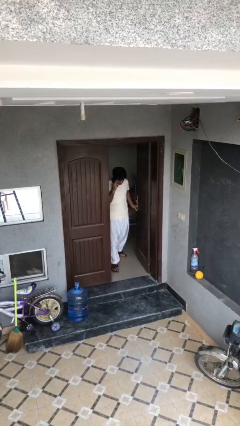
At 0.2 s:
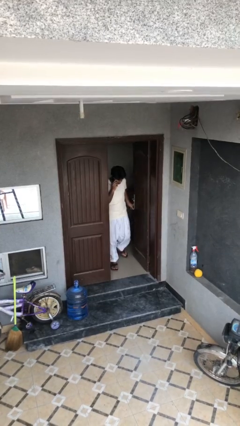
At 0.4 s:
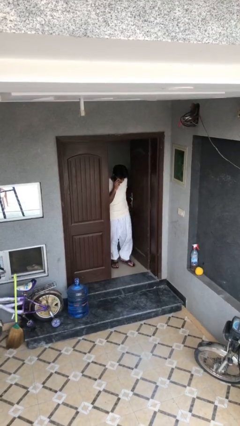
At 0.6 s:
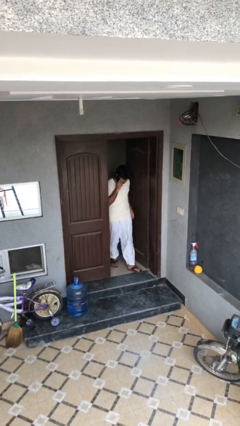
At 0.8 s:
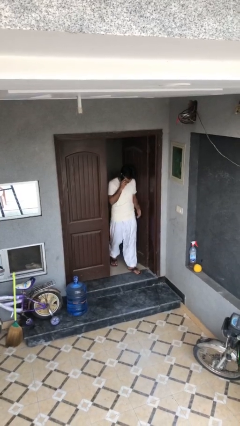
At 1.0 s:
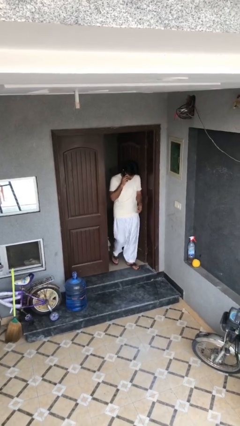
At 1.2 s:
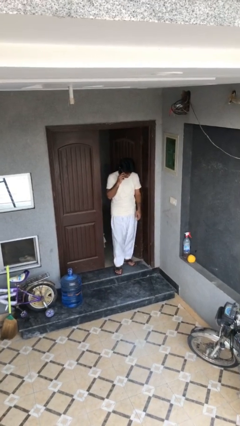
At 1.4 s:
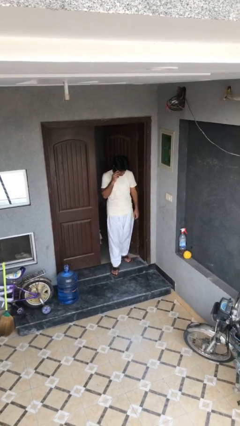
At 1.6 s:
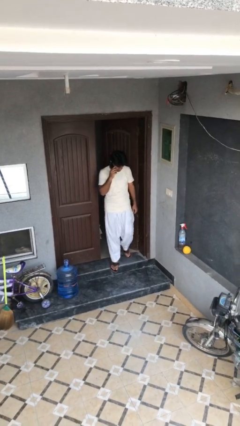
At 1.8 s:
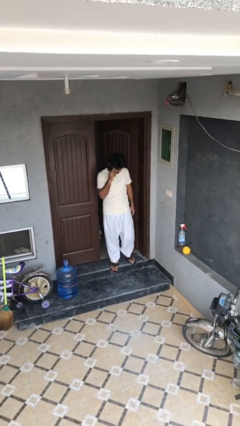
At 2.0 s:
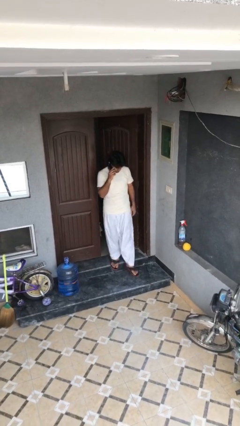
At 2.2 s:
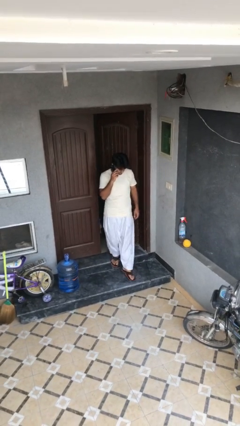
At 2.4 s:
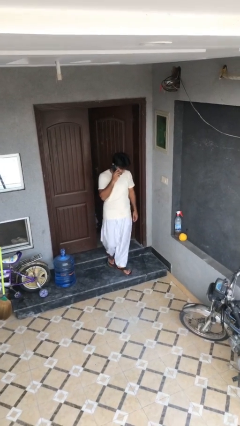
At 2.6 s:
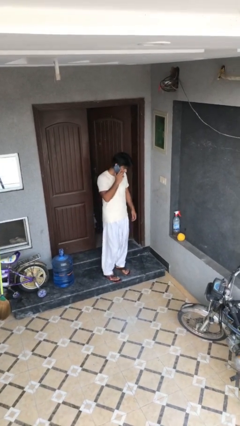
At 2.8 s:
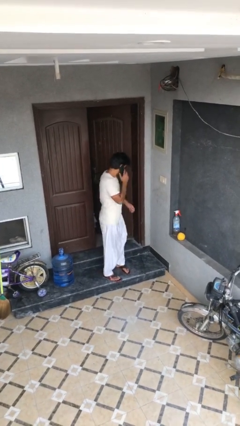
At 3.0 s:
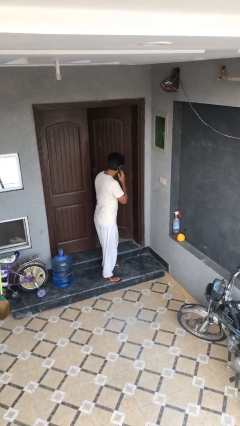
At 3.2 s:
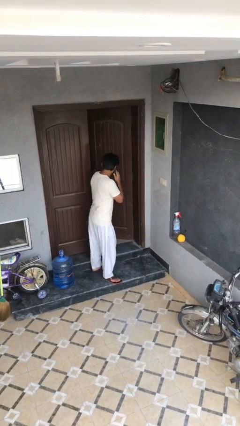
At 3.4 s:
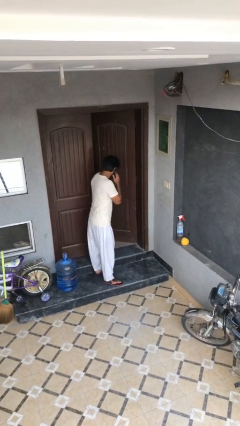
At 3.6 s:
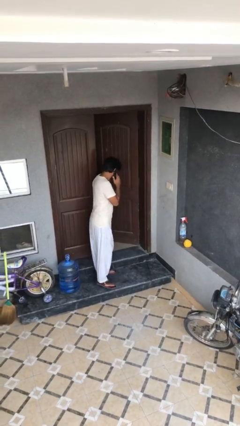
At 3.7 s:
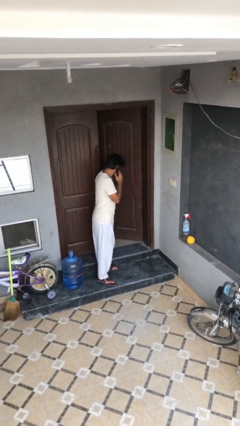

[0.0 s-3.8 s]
person enters scene through structure

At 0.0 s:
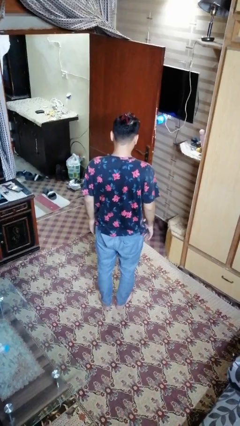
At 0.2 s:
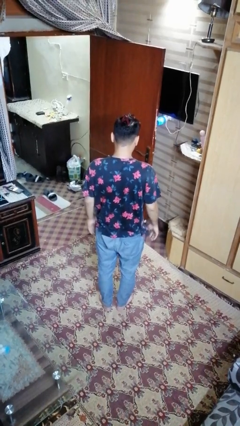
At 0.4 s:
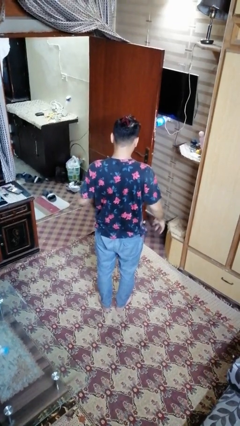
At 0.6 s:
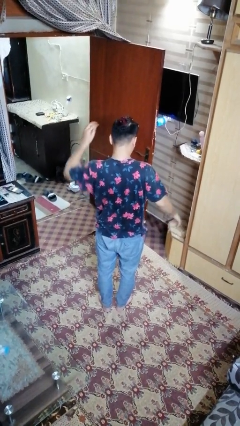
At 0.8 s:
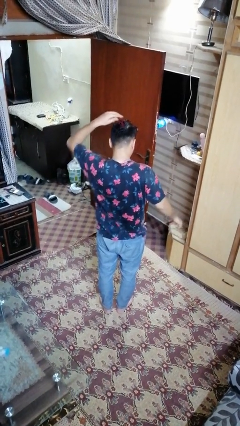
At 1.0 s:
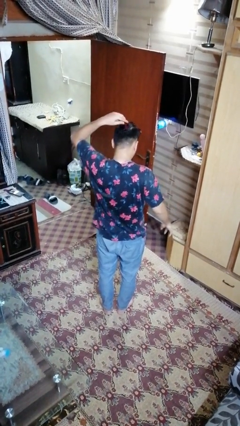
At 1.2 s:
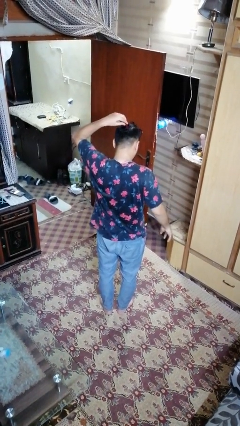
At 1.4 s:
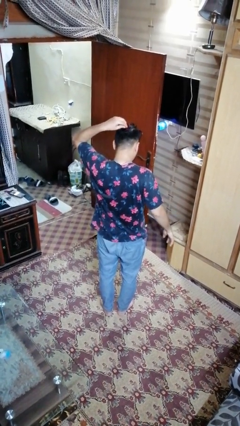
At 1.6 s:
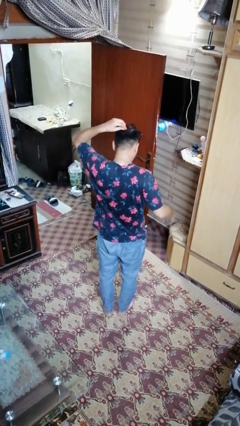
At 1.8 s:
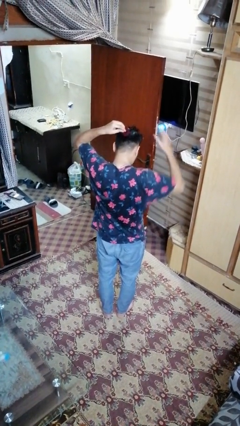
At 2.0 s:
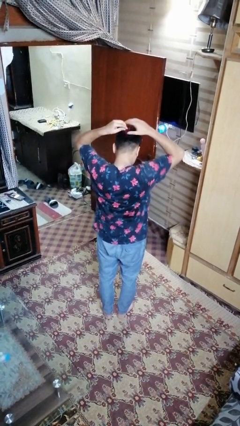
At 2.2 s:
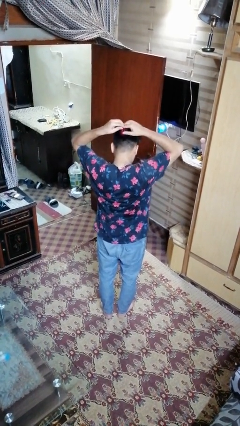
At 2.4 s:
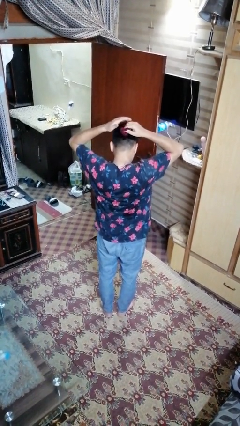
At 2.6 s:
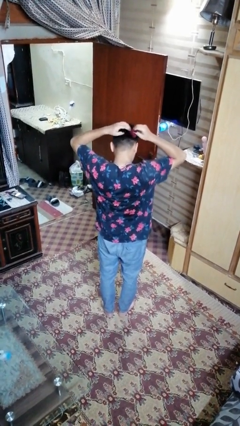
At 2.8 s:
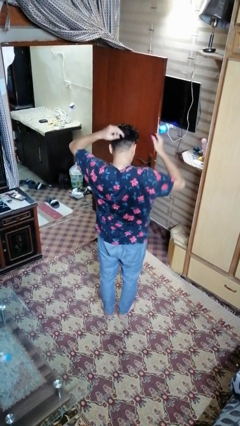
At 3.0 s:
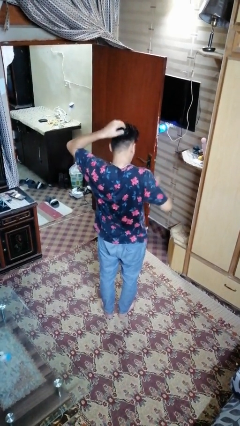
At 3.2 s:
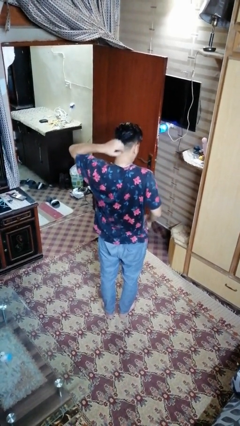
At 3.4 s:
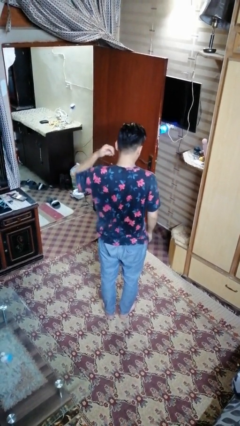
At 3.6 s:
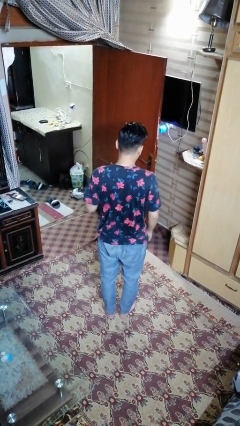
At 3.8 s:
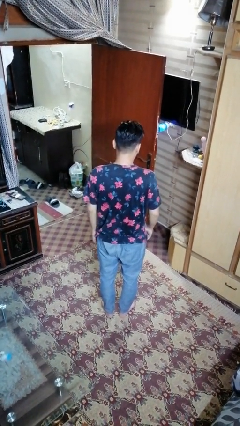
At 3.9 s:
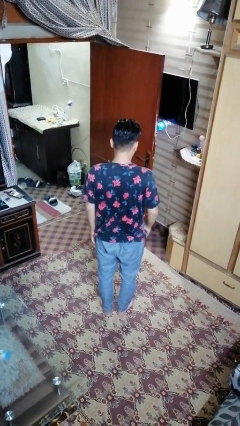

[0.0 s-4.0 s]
person takes off hairtie

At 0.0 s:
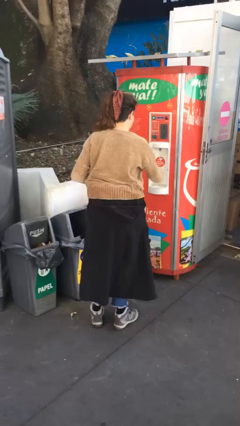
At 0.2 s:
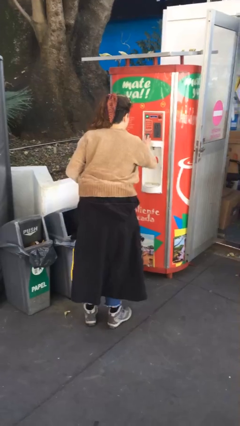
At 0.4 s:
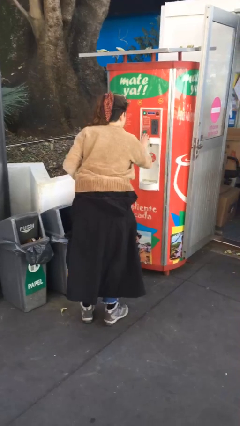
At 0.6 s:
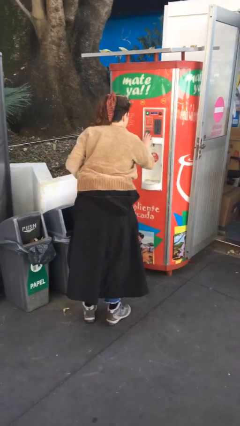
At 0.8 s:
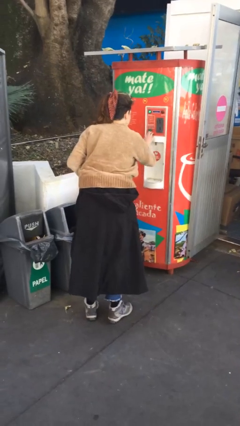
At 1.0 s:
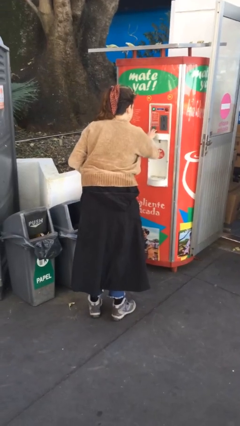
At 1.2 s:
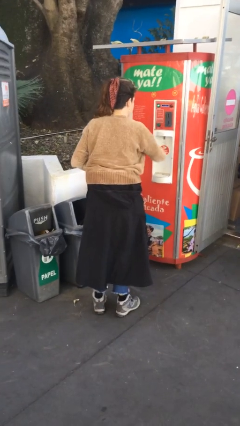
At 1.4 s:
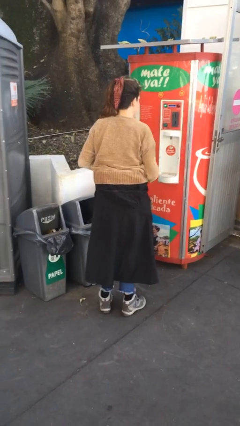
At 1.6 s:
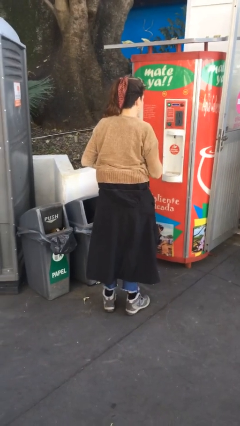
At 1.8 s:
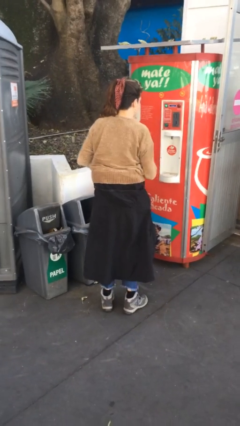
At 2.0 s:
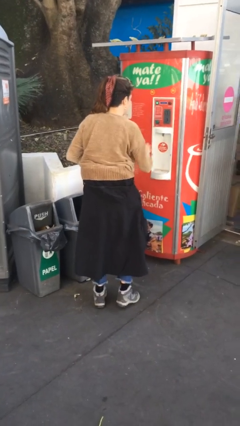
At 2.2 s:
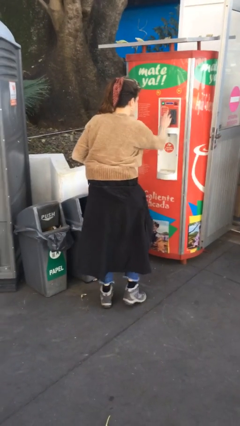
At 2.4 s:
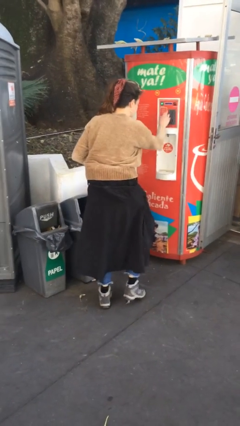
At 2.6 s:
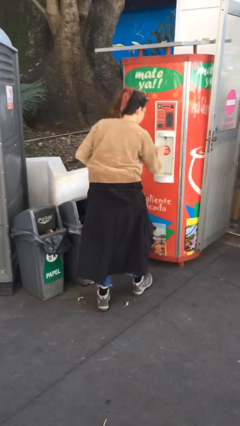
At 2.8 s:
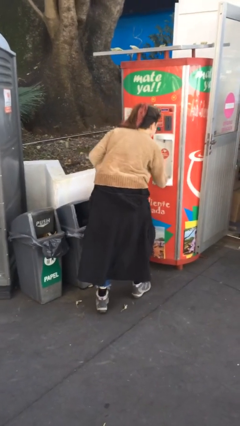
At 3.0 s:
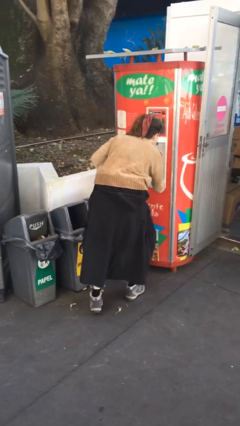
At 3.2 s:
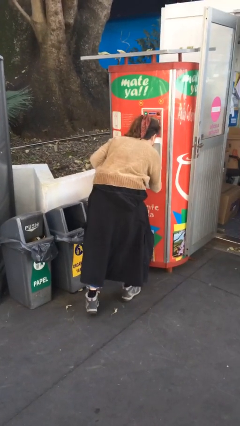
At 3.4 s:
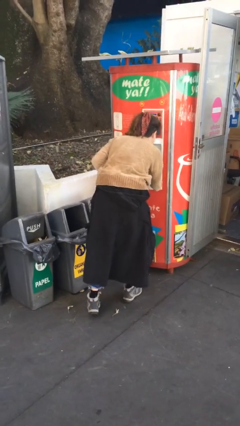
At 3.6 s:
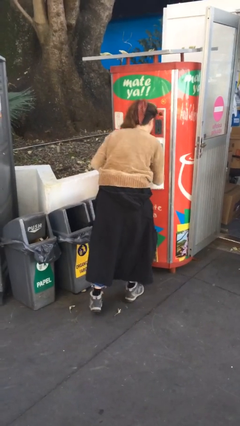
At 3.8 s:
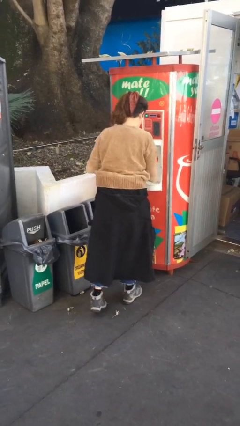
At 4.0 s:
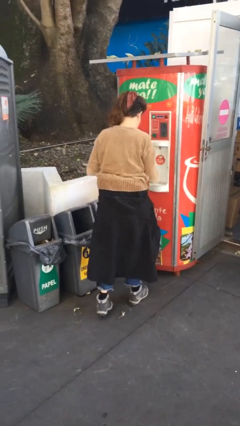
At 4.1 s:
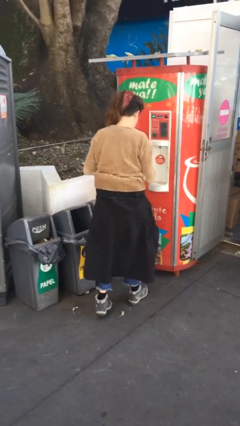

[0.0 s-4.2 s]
person purchases from machine

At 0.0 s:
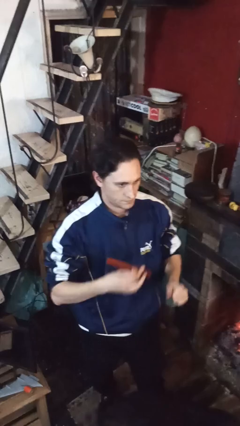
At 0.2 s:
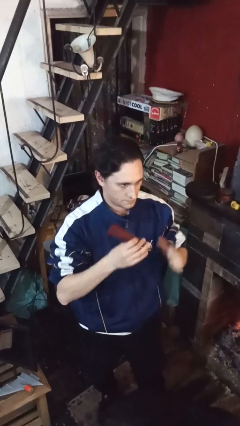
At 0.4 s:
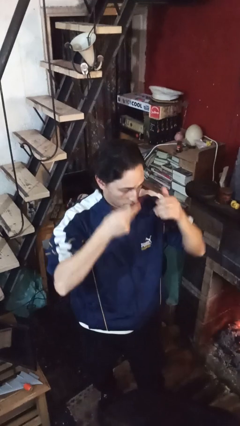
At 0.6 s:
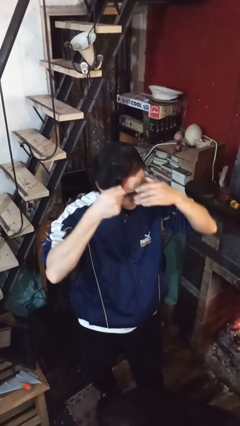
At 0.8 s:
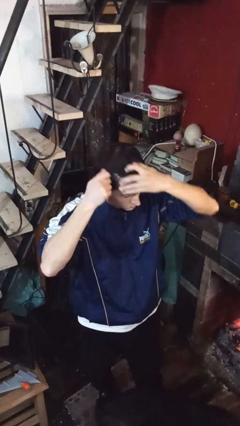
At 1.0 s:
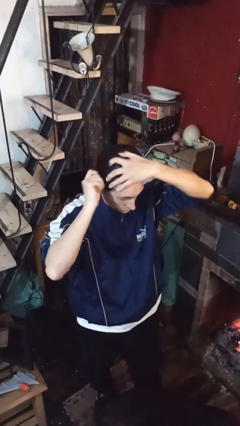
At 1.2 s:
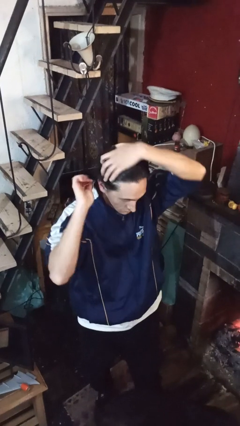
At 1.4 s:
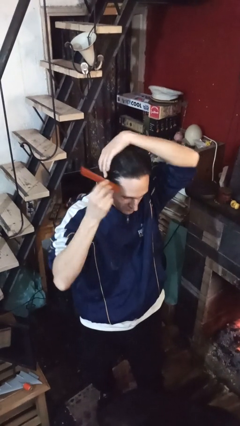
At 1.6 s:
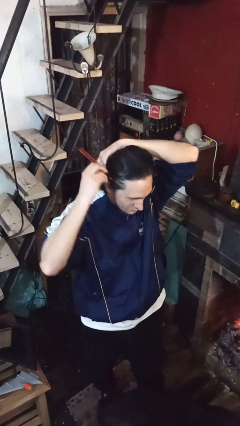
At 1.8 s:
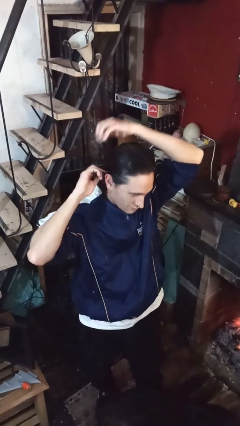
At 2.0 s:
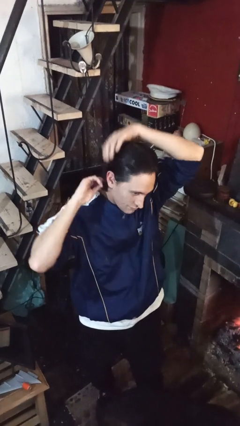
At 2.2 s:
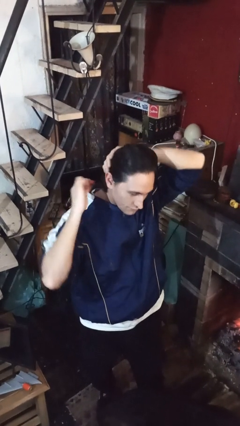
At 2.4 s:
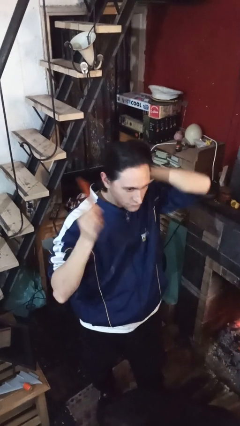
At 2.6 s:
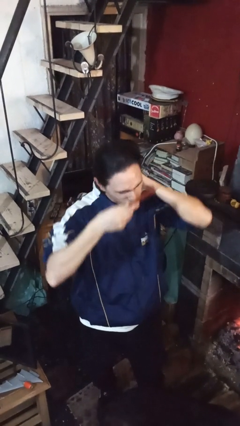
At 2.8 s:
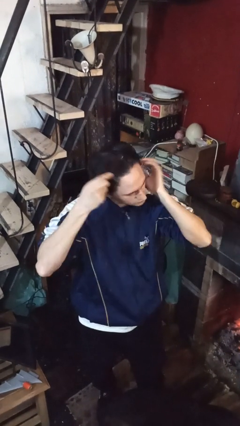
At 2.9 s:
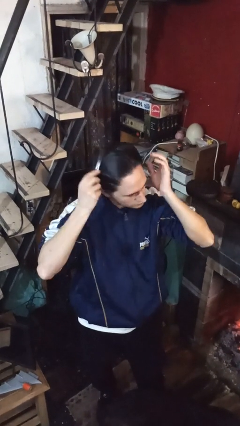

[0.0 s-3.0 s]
person brushes hair

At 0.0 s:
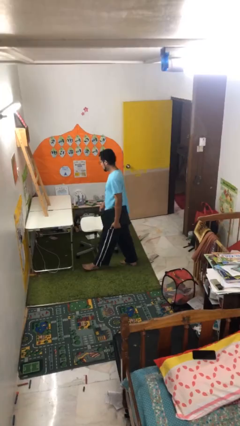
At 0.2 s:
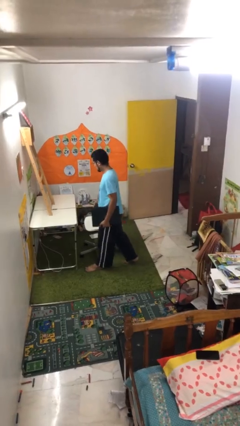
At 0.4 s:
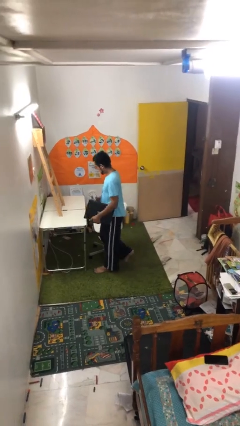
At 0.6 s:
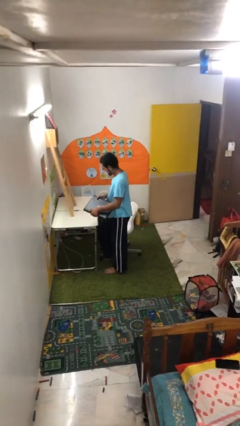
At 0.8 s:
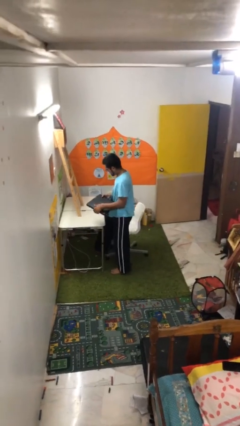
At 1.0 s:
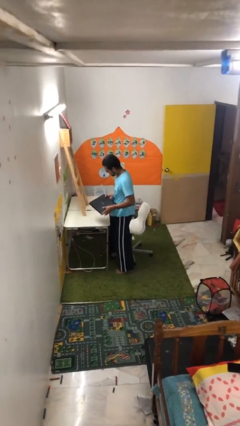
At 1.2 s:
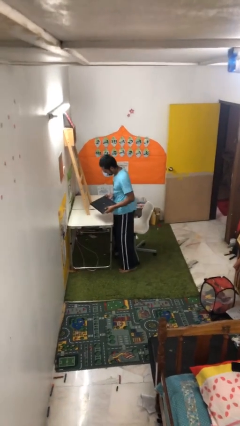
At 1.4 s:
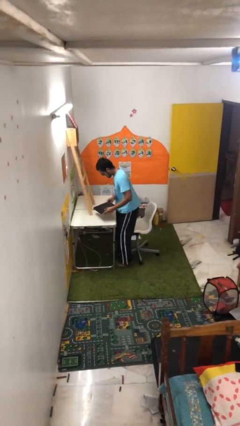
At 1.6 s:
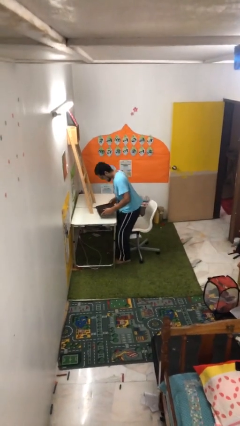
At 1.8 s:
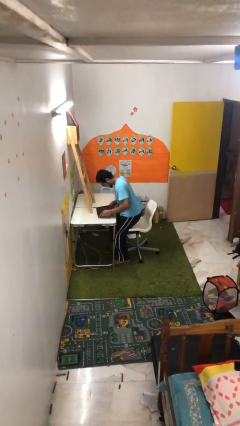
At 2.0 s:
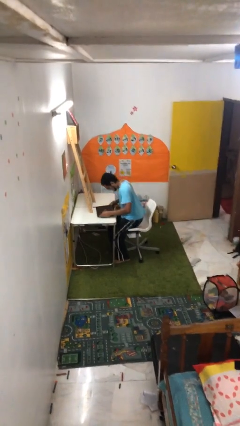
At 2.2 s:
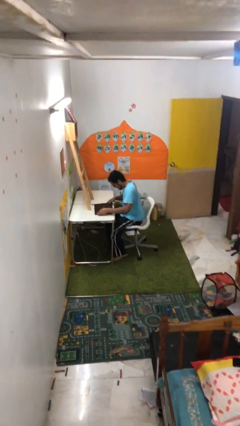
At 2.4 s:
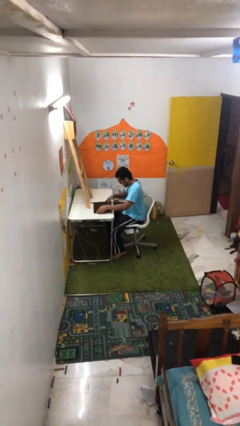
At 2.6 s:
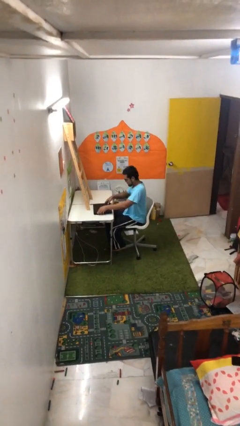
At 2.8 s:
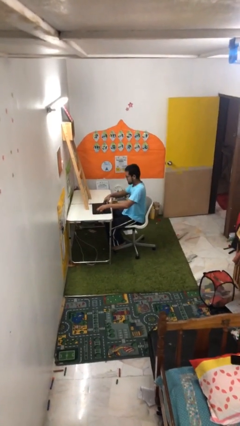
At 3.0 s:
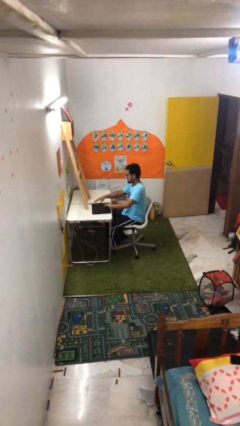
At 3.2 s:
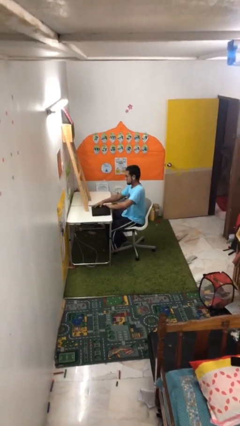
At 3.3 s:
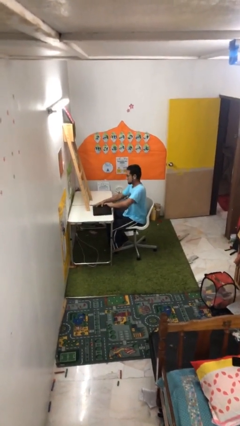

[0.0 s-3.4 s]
person sits down
